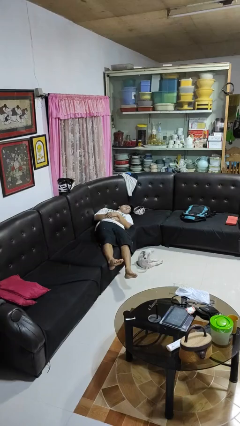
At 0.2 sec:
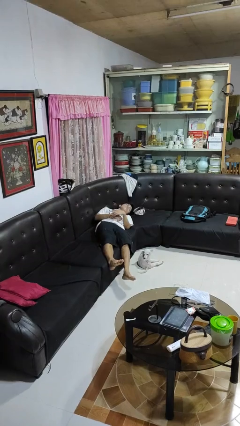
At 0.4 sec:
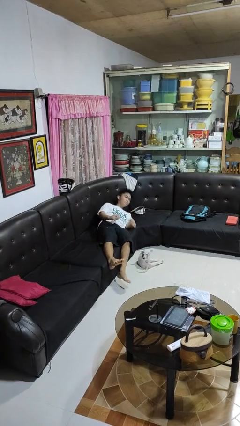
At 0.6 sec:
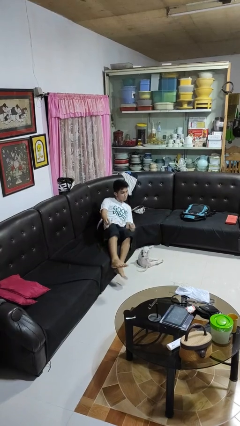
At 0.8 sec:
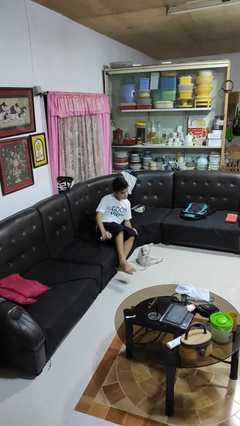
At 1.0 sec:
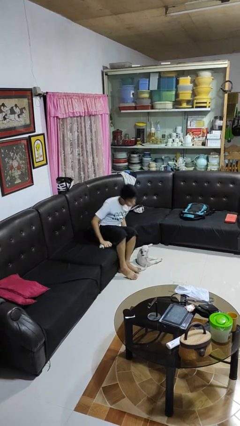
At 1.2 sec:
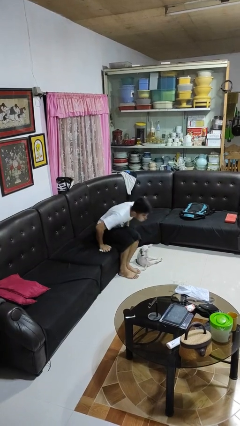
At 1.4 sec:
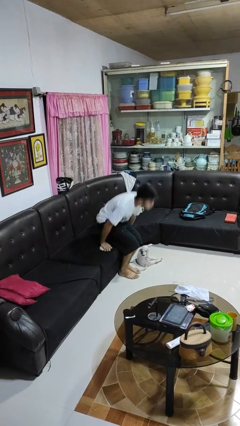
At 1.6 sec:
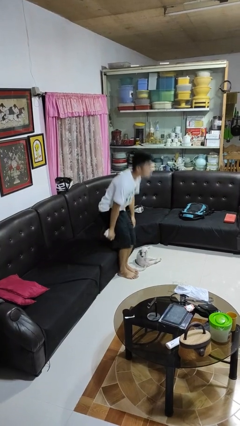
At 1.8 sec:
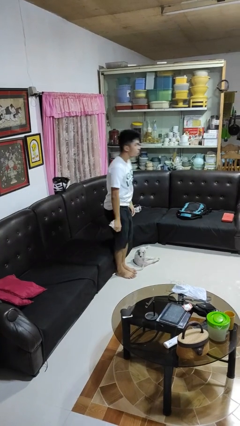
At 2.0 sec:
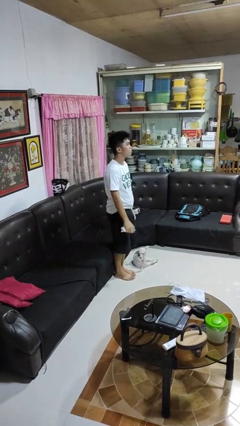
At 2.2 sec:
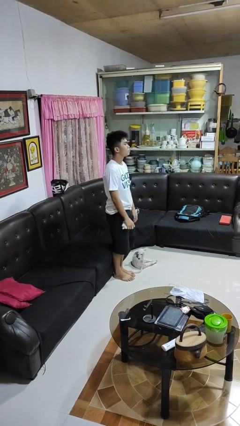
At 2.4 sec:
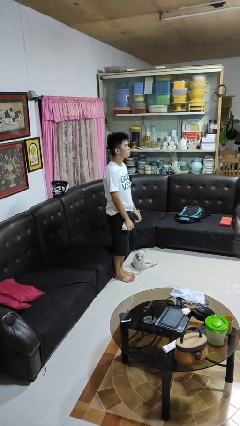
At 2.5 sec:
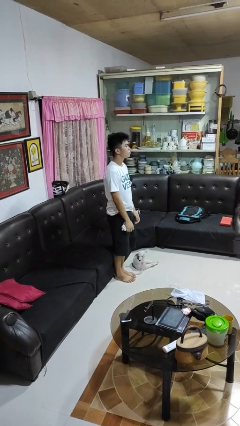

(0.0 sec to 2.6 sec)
person stands up

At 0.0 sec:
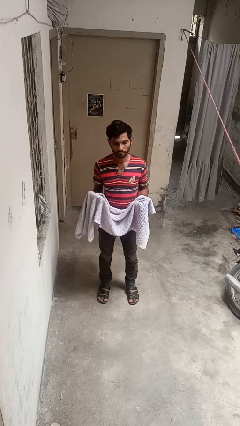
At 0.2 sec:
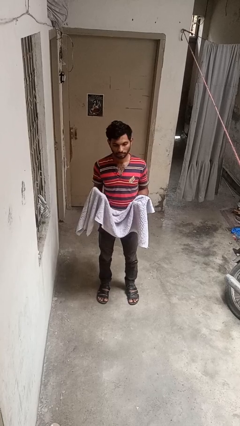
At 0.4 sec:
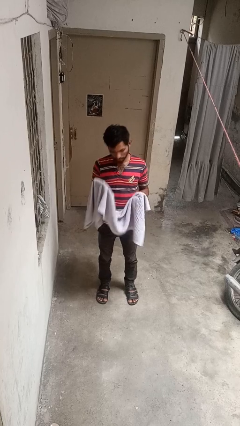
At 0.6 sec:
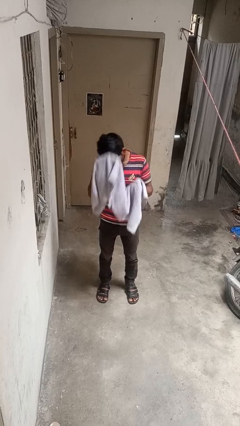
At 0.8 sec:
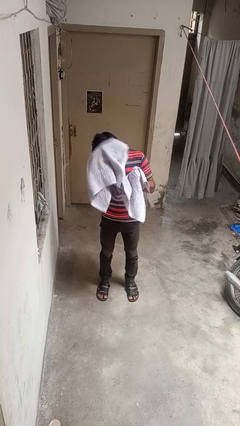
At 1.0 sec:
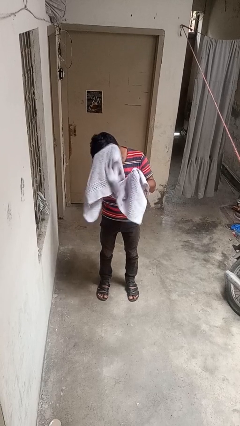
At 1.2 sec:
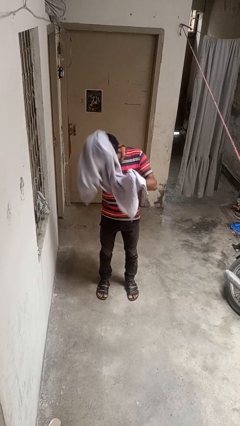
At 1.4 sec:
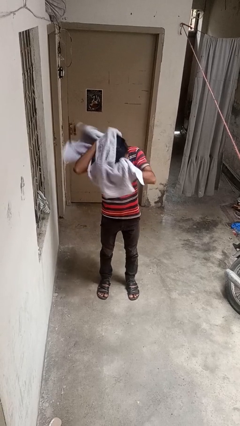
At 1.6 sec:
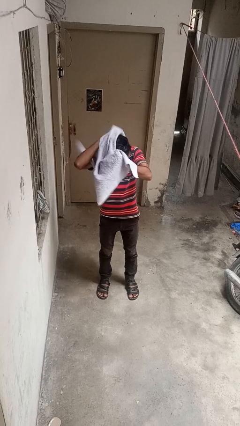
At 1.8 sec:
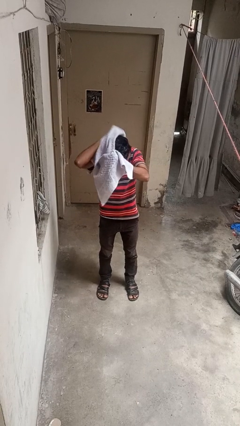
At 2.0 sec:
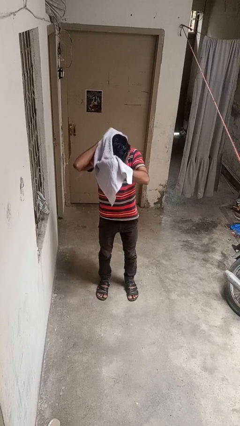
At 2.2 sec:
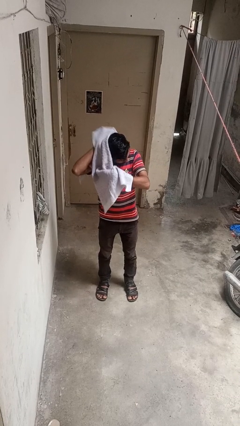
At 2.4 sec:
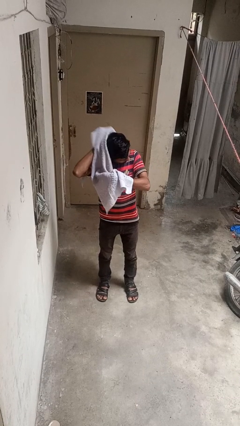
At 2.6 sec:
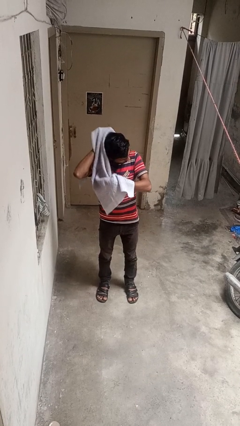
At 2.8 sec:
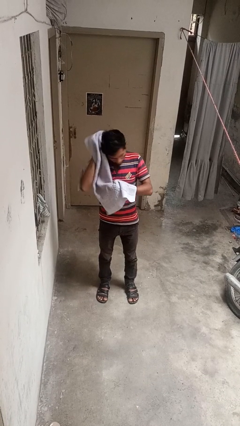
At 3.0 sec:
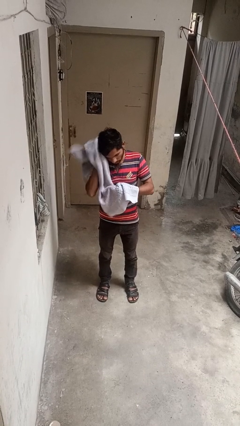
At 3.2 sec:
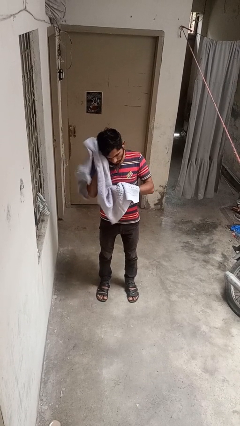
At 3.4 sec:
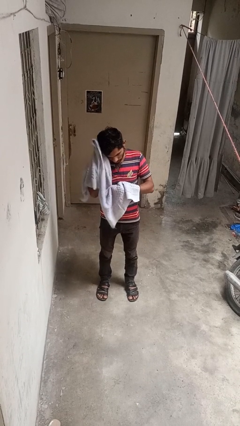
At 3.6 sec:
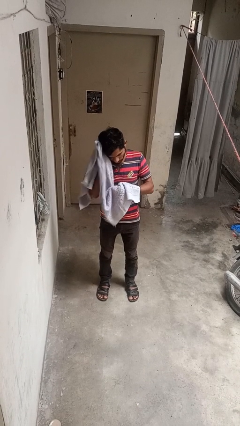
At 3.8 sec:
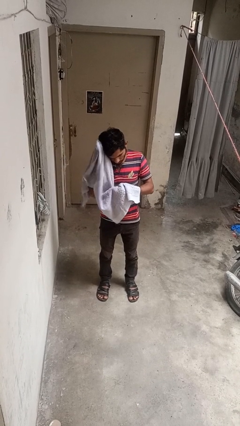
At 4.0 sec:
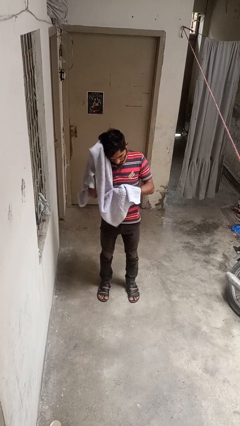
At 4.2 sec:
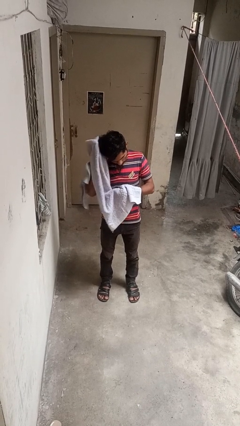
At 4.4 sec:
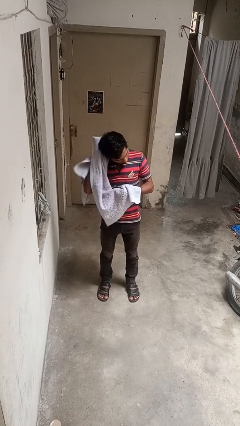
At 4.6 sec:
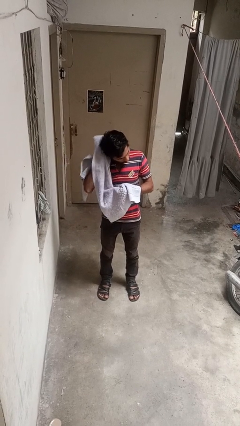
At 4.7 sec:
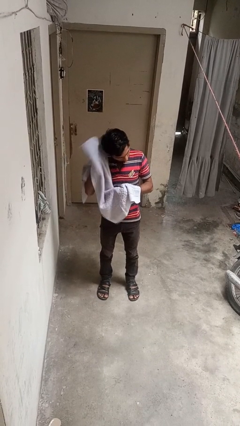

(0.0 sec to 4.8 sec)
person dries hair with towel

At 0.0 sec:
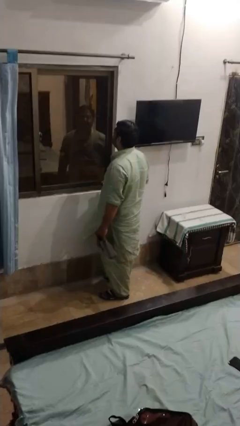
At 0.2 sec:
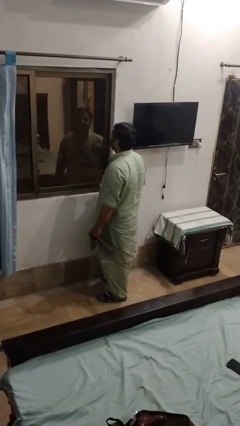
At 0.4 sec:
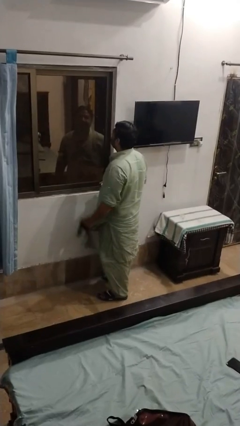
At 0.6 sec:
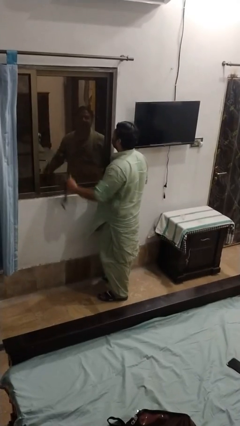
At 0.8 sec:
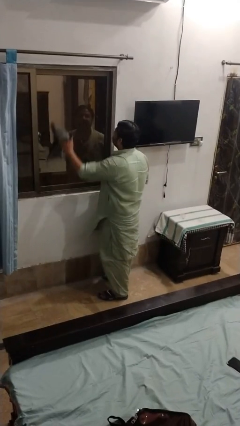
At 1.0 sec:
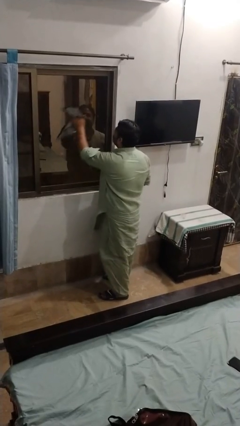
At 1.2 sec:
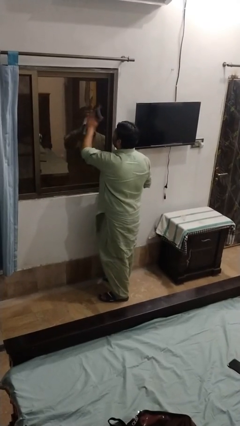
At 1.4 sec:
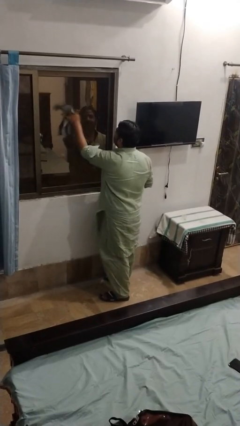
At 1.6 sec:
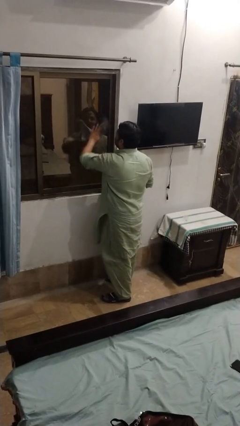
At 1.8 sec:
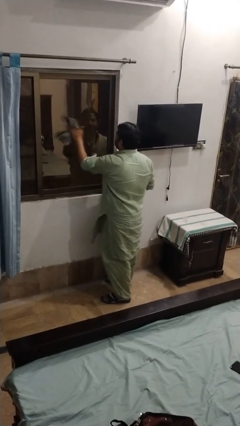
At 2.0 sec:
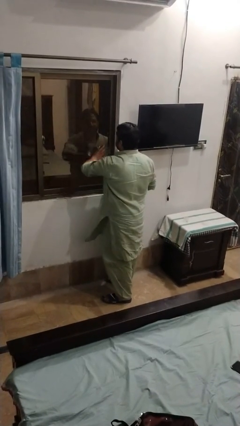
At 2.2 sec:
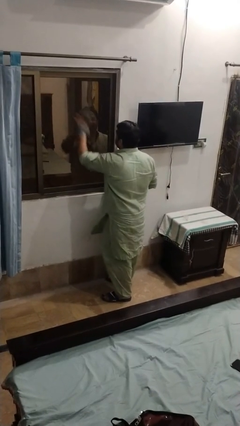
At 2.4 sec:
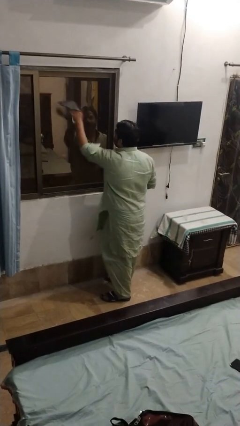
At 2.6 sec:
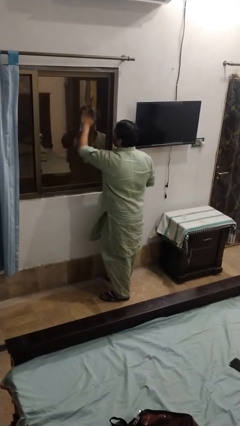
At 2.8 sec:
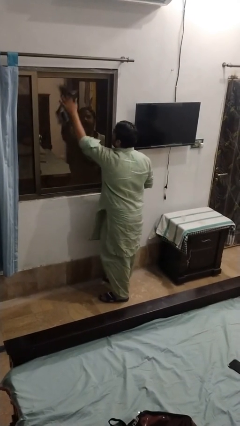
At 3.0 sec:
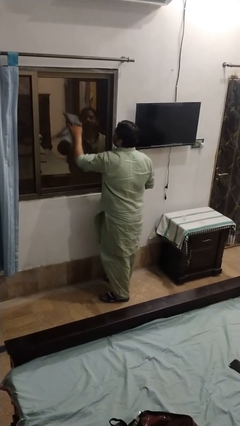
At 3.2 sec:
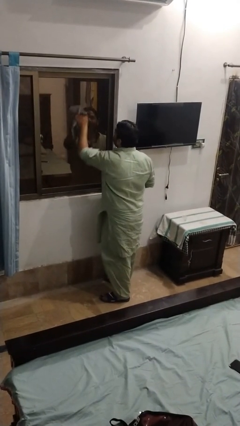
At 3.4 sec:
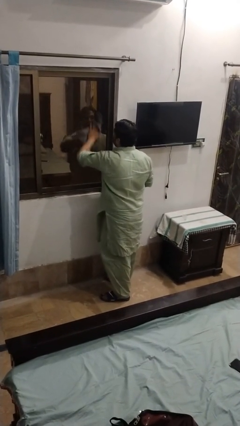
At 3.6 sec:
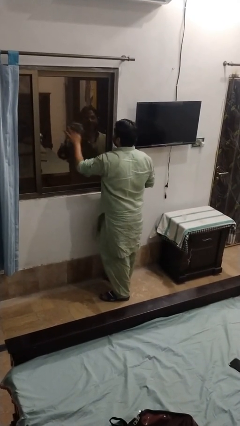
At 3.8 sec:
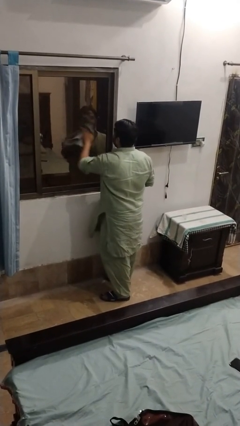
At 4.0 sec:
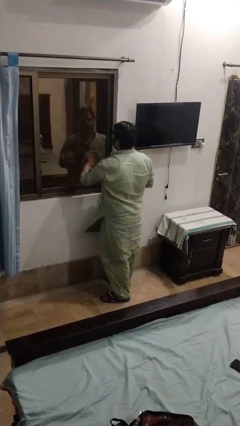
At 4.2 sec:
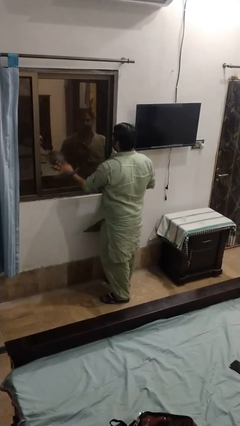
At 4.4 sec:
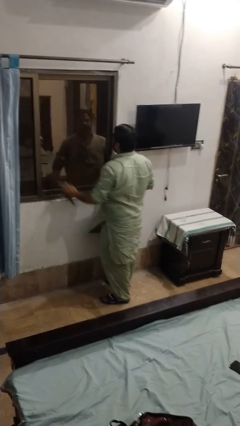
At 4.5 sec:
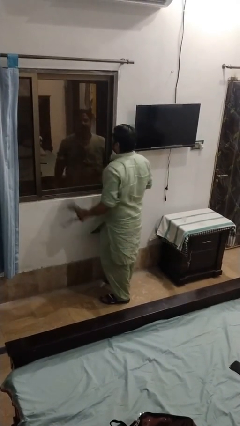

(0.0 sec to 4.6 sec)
person washes window

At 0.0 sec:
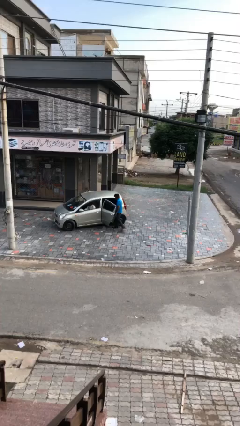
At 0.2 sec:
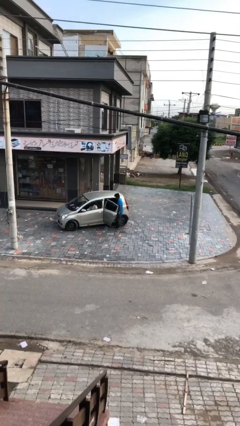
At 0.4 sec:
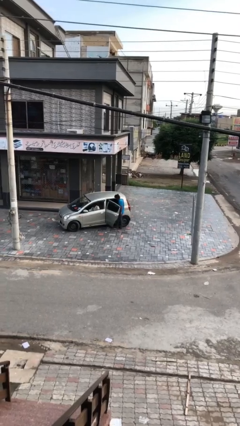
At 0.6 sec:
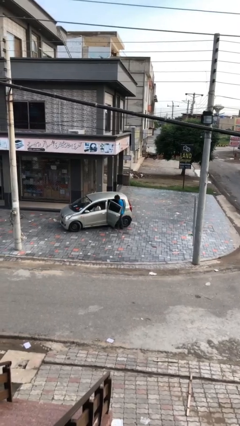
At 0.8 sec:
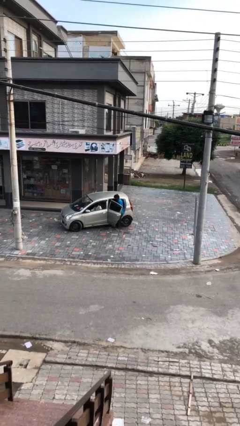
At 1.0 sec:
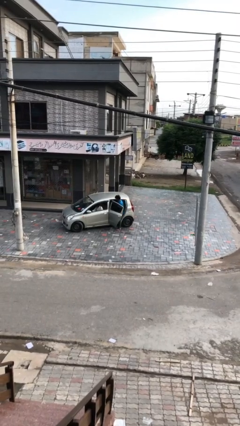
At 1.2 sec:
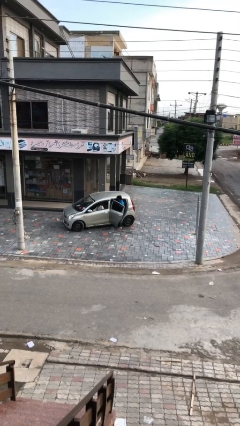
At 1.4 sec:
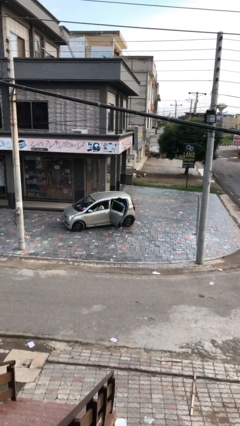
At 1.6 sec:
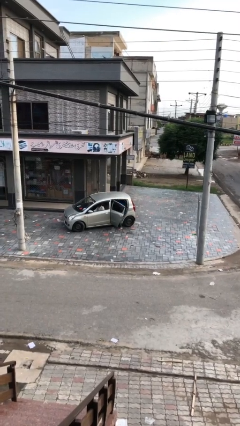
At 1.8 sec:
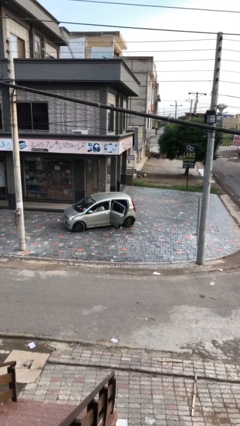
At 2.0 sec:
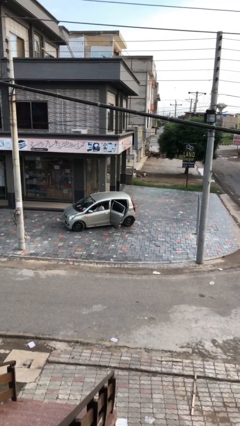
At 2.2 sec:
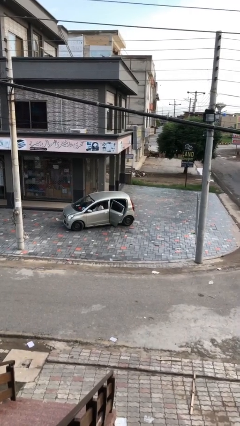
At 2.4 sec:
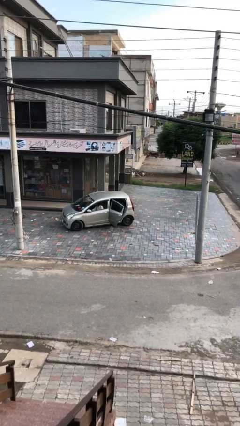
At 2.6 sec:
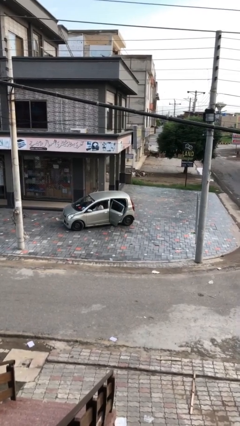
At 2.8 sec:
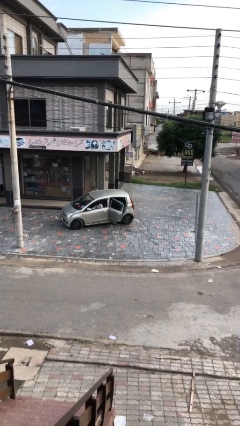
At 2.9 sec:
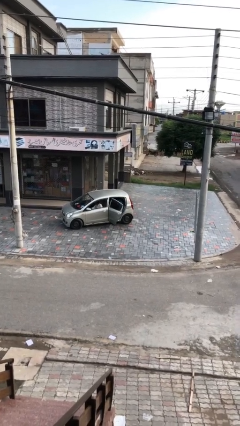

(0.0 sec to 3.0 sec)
person enters car

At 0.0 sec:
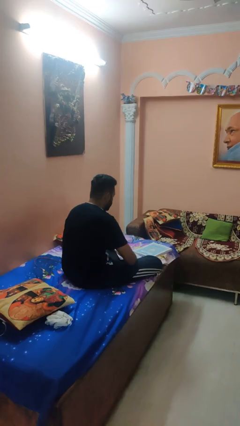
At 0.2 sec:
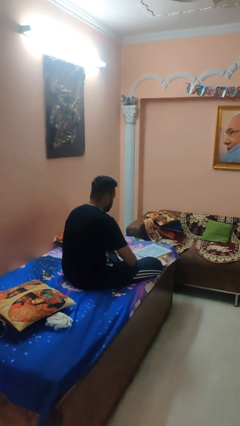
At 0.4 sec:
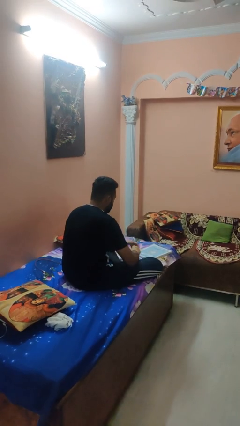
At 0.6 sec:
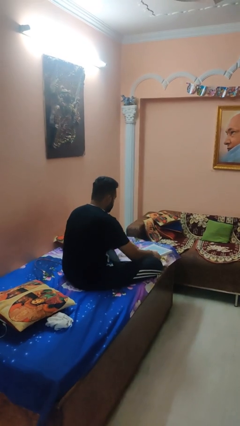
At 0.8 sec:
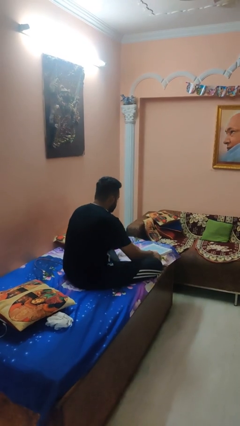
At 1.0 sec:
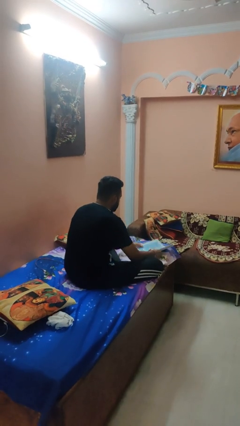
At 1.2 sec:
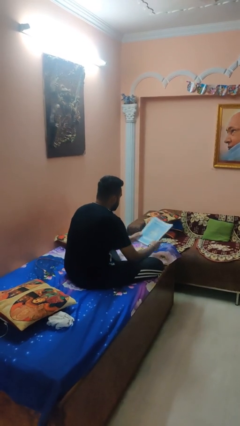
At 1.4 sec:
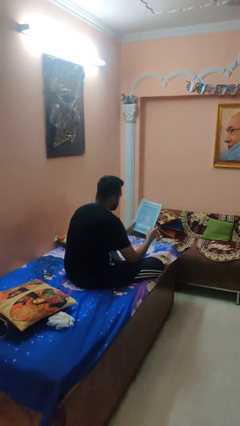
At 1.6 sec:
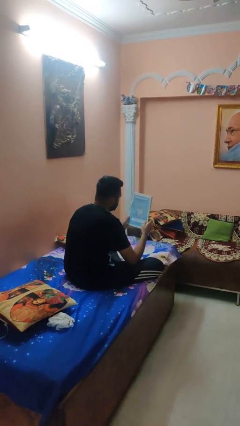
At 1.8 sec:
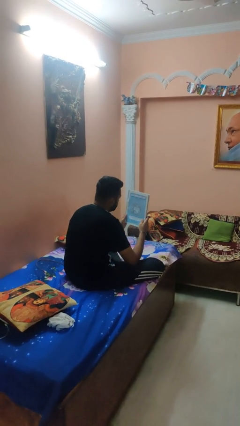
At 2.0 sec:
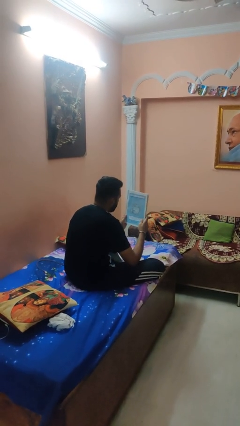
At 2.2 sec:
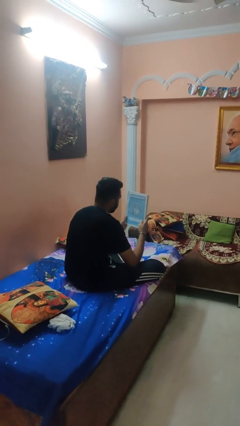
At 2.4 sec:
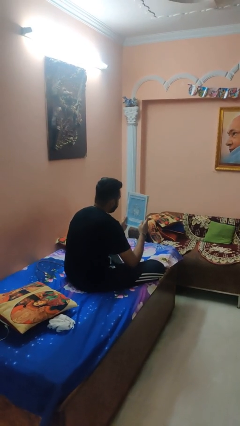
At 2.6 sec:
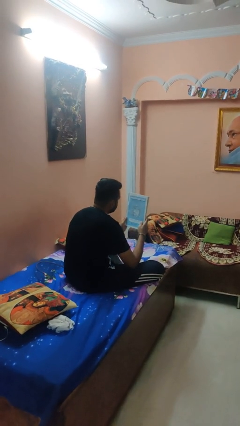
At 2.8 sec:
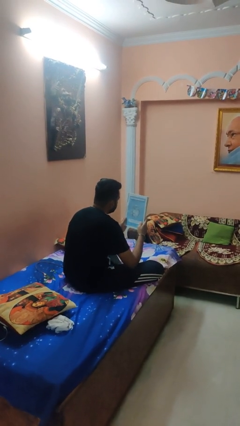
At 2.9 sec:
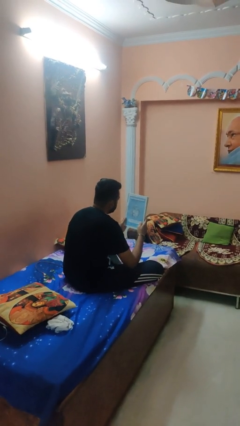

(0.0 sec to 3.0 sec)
person picks up object from bed
